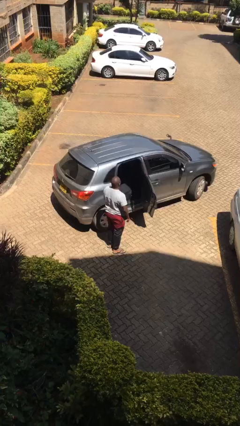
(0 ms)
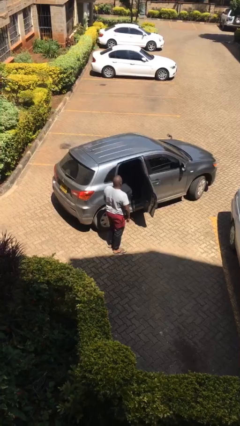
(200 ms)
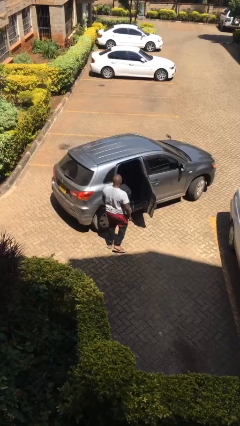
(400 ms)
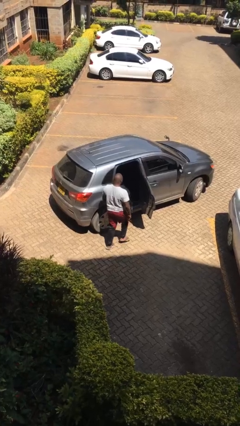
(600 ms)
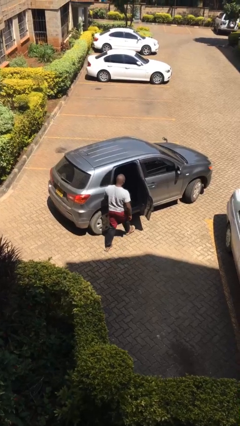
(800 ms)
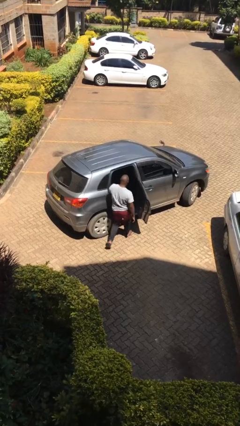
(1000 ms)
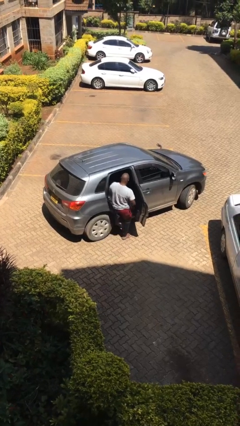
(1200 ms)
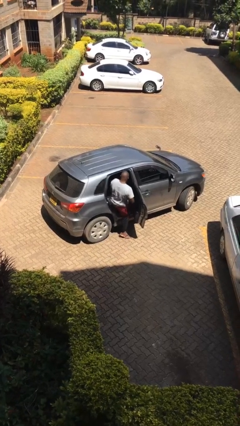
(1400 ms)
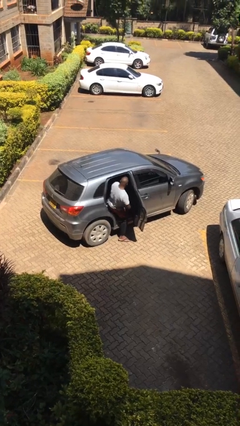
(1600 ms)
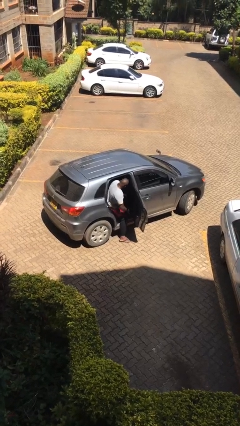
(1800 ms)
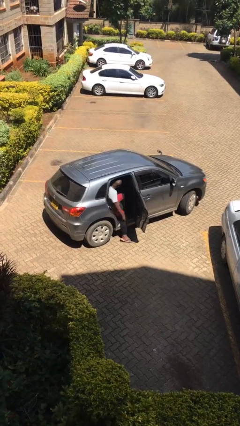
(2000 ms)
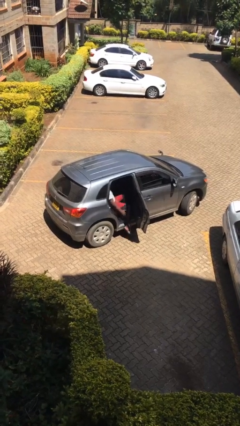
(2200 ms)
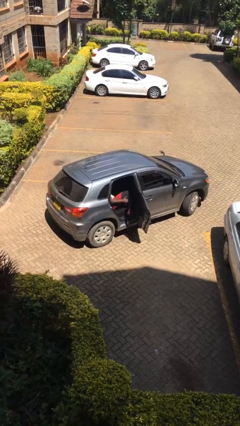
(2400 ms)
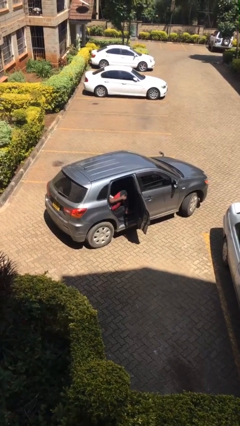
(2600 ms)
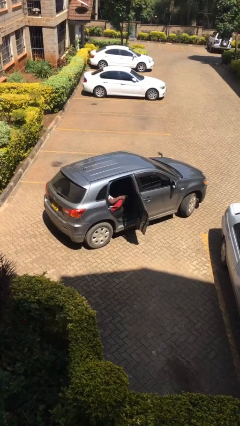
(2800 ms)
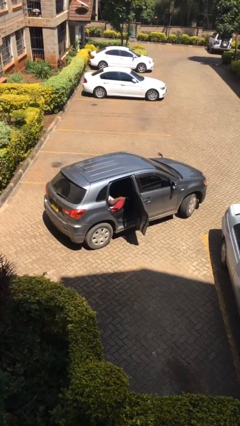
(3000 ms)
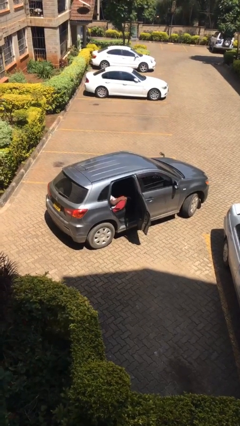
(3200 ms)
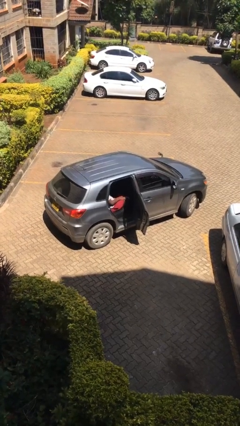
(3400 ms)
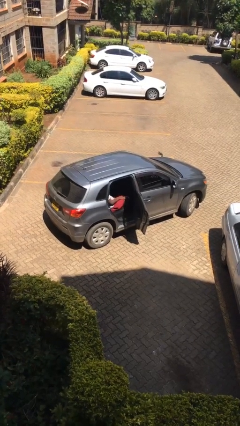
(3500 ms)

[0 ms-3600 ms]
person enters car

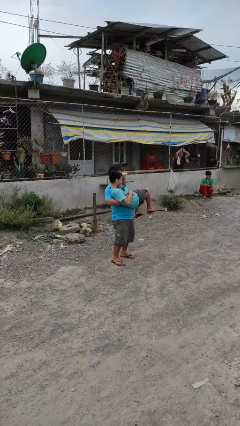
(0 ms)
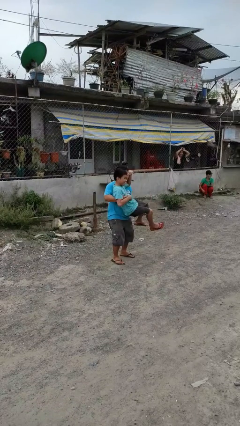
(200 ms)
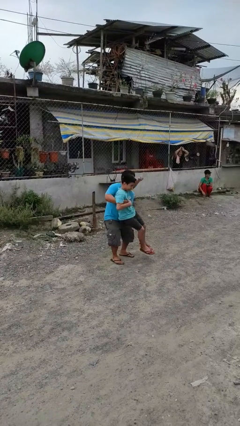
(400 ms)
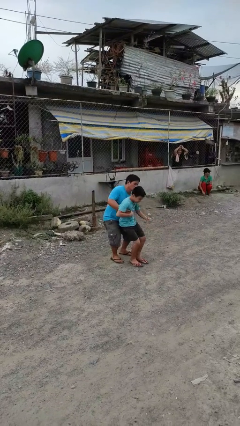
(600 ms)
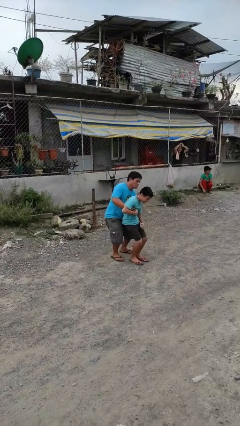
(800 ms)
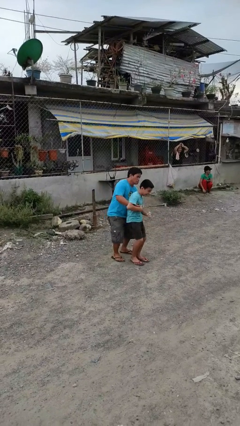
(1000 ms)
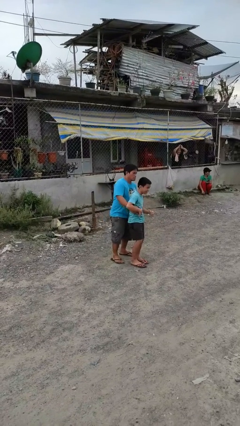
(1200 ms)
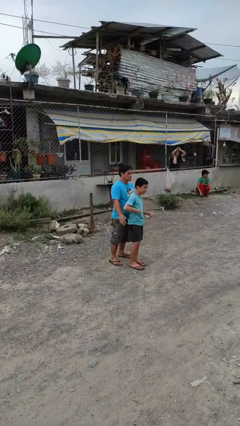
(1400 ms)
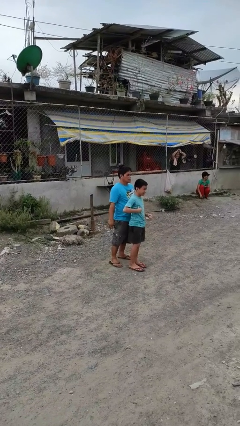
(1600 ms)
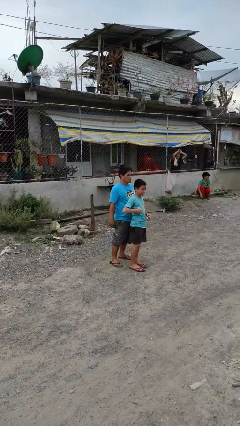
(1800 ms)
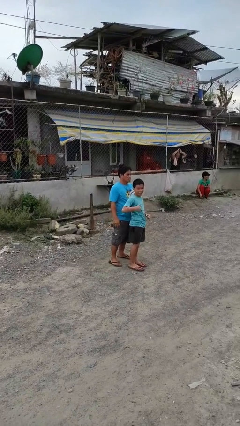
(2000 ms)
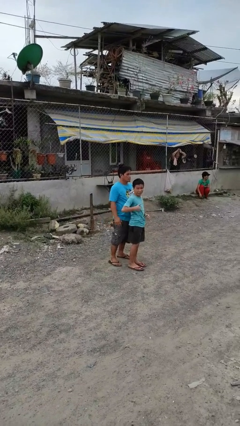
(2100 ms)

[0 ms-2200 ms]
person puts down person

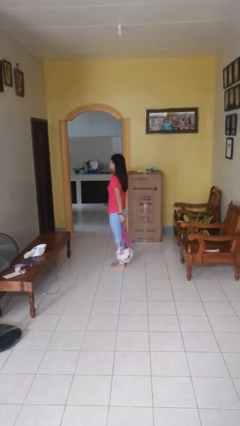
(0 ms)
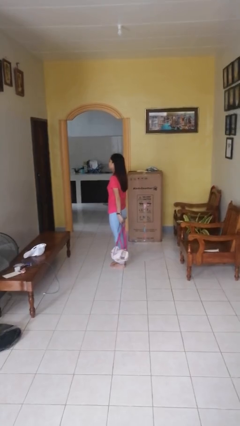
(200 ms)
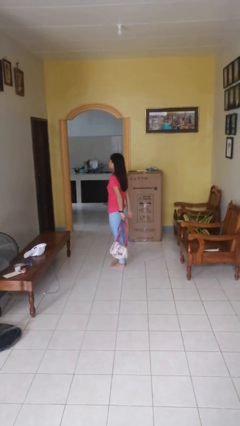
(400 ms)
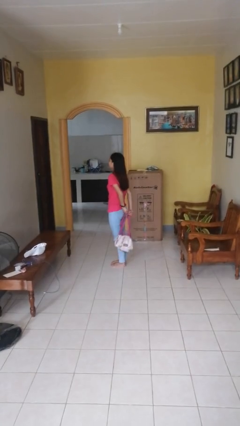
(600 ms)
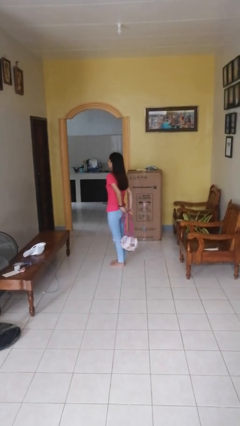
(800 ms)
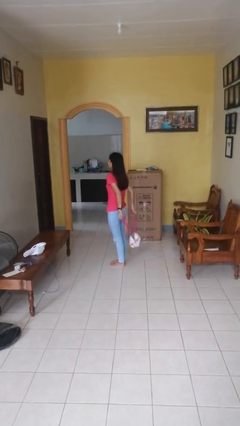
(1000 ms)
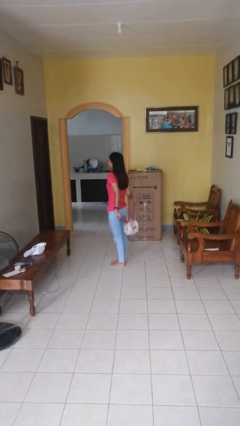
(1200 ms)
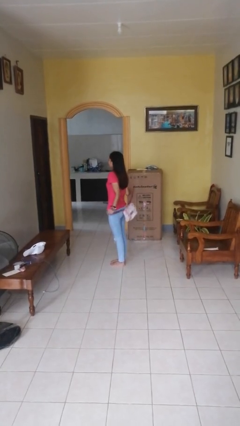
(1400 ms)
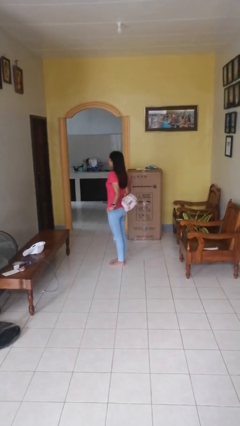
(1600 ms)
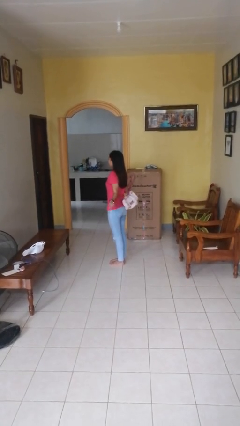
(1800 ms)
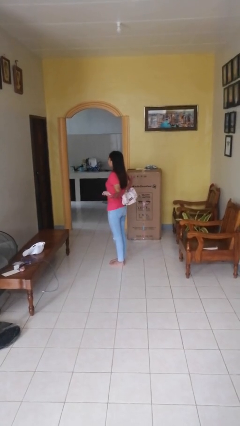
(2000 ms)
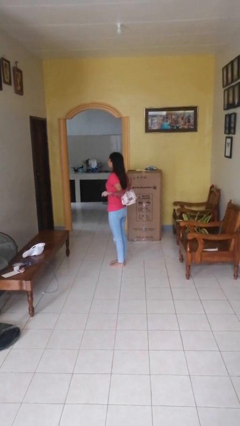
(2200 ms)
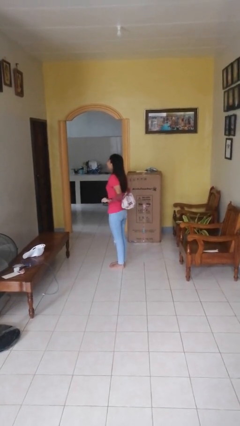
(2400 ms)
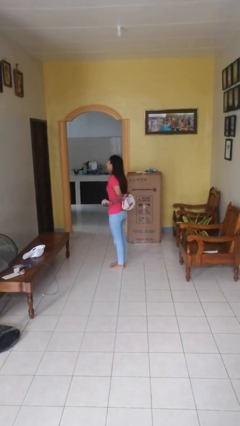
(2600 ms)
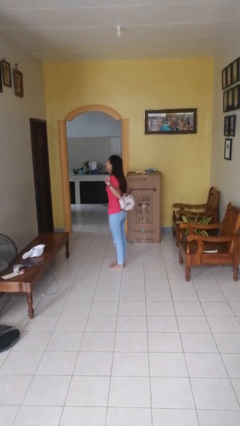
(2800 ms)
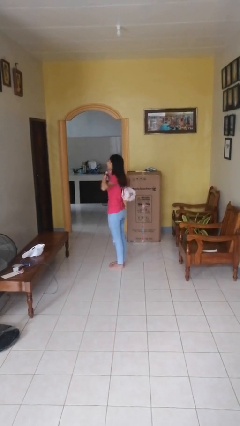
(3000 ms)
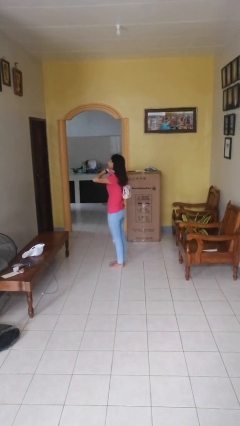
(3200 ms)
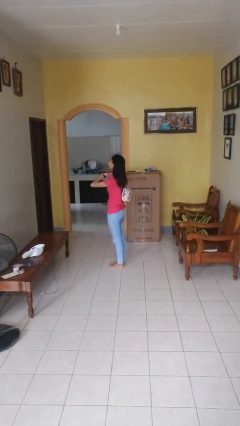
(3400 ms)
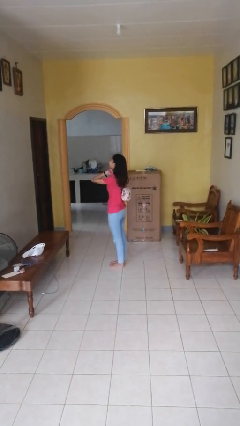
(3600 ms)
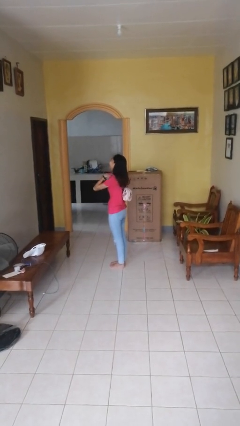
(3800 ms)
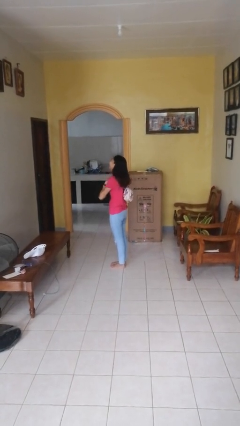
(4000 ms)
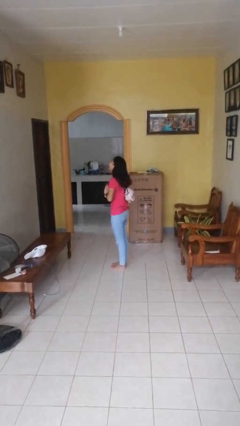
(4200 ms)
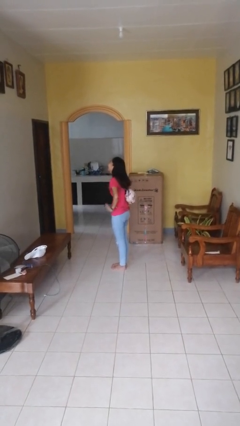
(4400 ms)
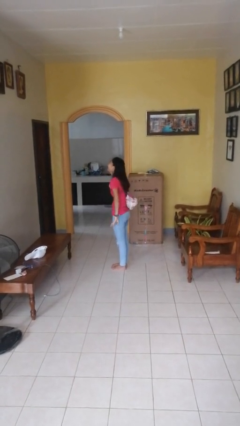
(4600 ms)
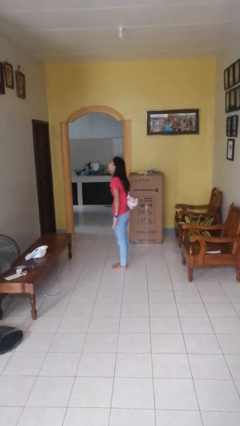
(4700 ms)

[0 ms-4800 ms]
person puts on backpack

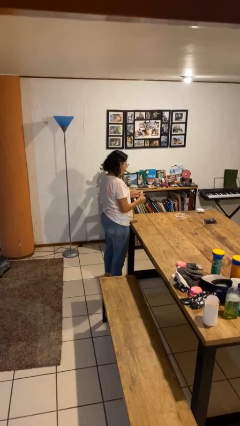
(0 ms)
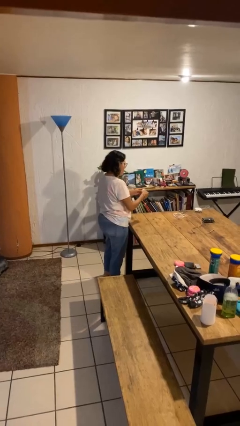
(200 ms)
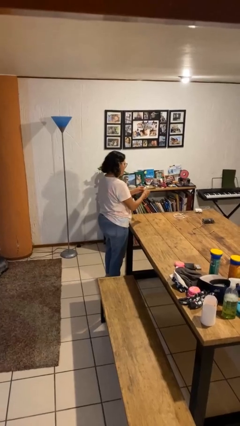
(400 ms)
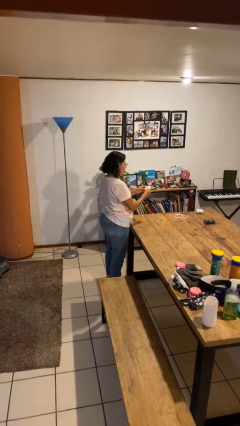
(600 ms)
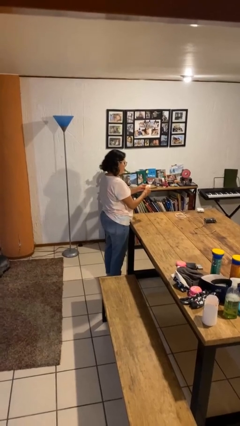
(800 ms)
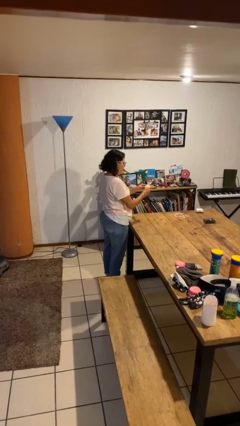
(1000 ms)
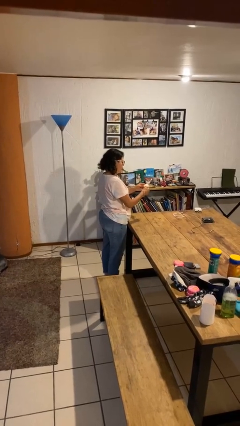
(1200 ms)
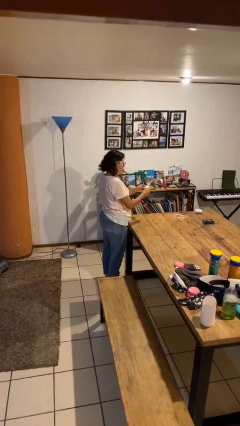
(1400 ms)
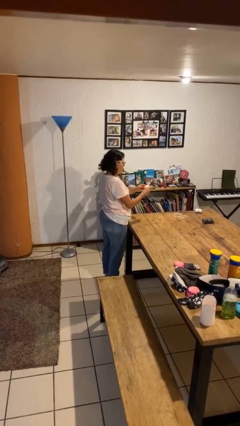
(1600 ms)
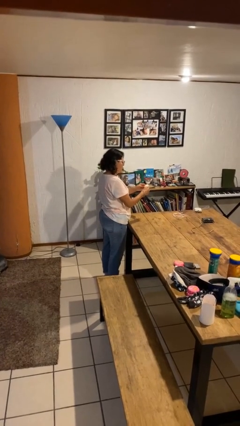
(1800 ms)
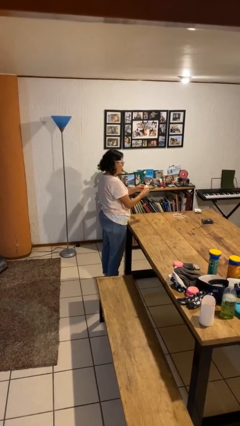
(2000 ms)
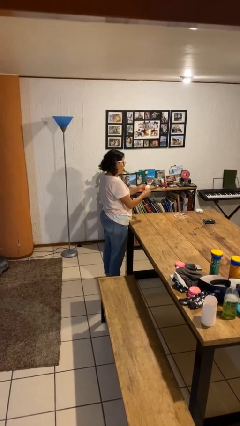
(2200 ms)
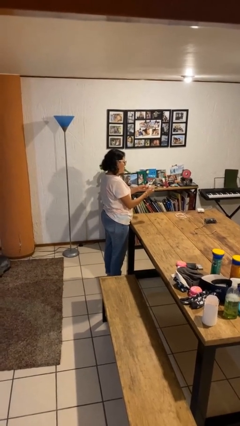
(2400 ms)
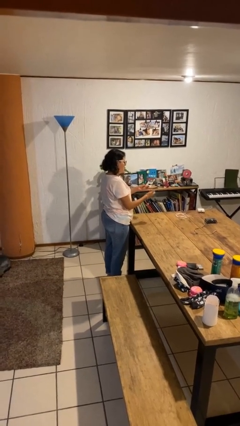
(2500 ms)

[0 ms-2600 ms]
person lights candle

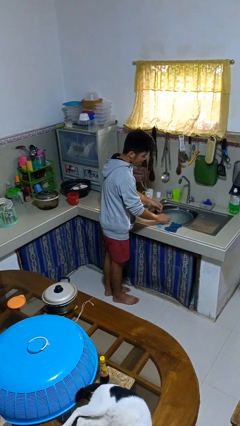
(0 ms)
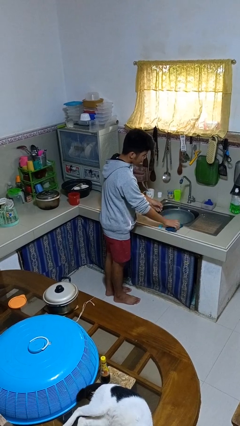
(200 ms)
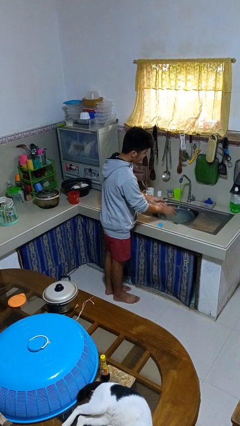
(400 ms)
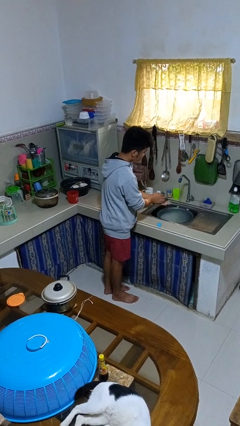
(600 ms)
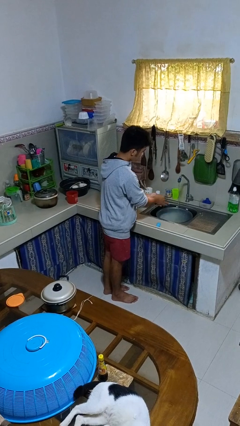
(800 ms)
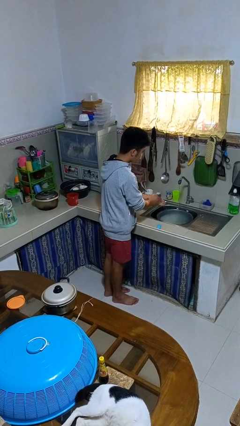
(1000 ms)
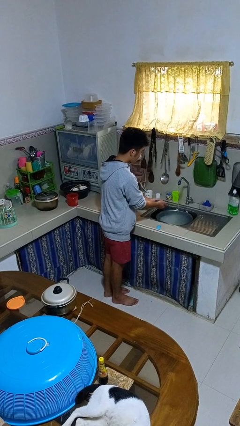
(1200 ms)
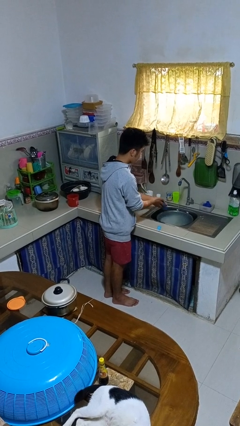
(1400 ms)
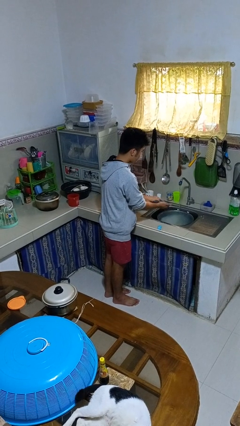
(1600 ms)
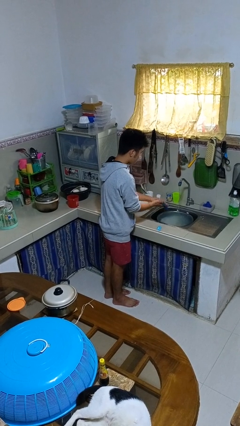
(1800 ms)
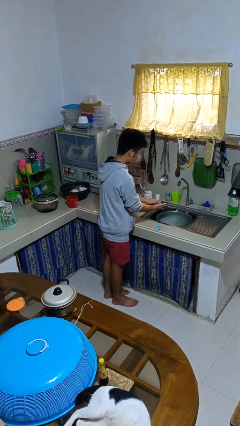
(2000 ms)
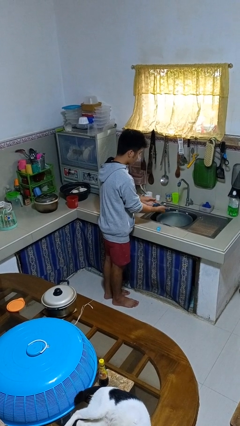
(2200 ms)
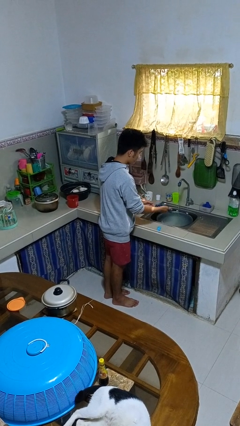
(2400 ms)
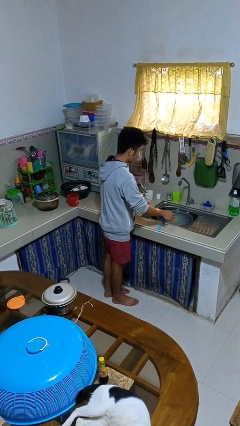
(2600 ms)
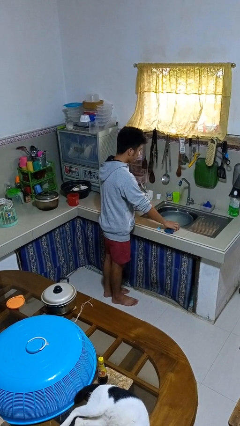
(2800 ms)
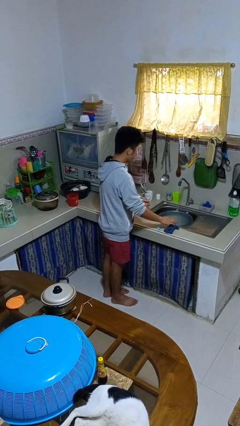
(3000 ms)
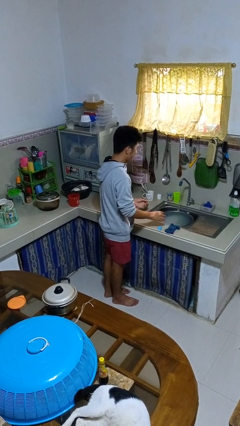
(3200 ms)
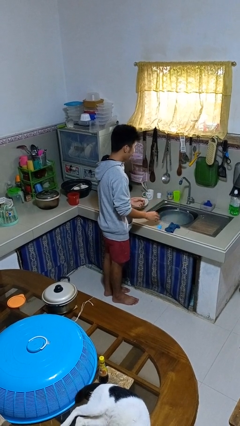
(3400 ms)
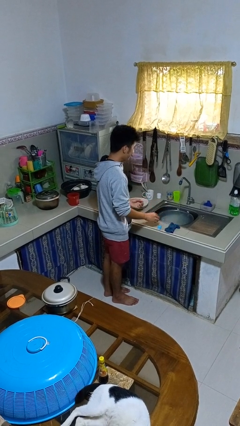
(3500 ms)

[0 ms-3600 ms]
person dries hands with towel

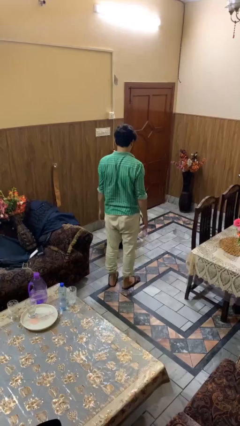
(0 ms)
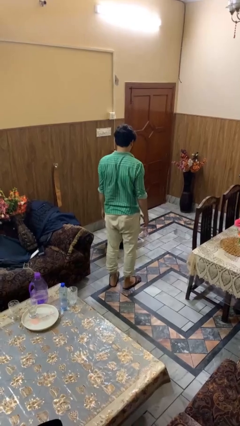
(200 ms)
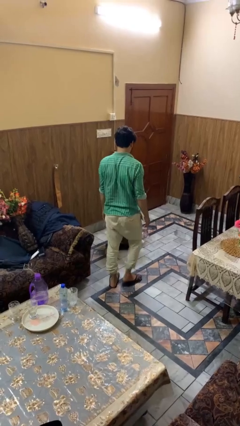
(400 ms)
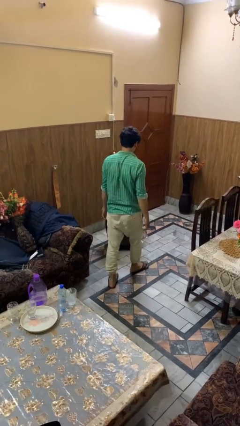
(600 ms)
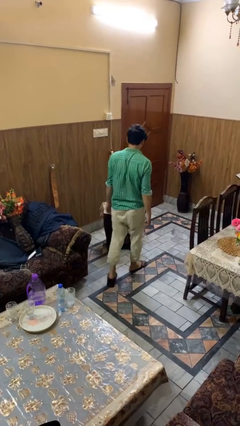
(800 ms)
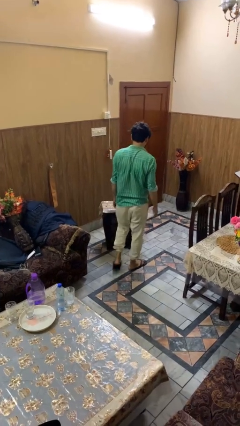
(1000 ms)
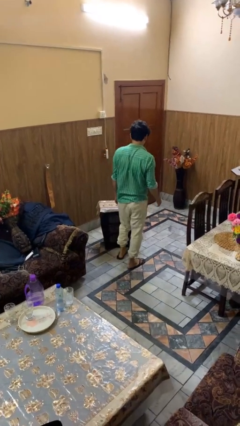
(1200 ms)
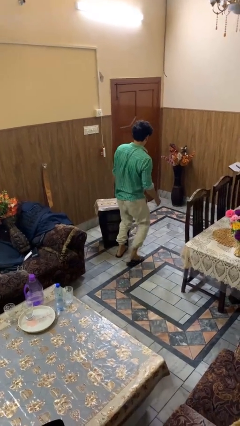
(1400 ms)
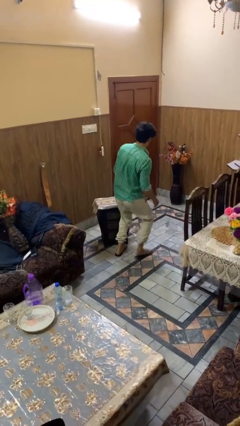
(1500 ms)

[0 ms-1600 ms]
person trips on object on floor
